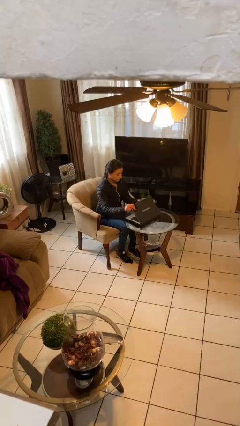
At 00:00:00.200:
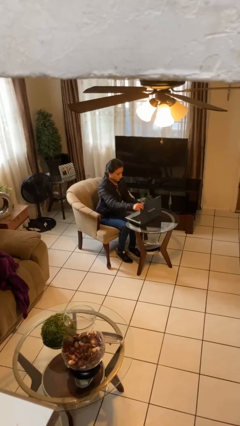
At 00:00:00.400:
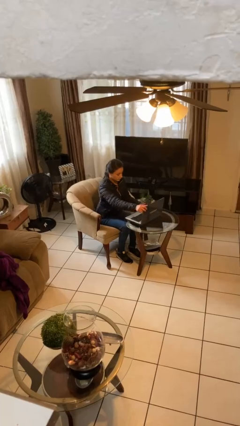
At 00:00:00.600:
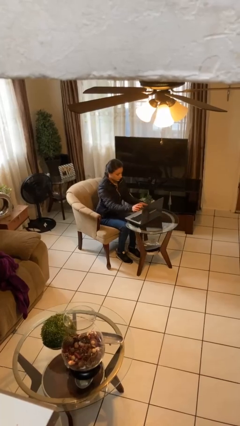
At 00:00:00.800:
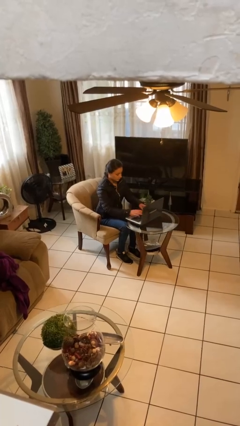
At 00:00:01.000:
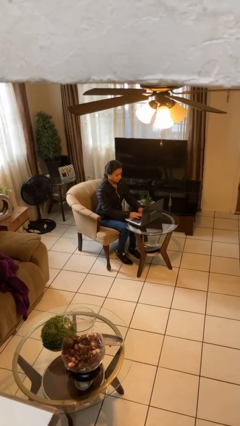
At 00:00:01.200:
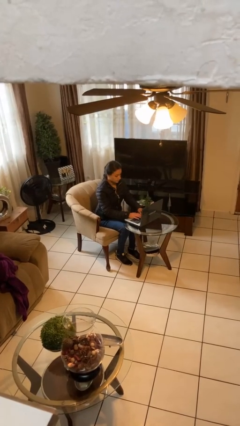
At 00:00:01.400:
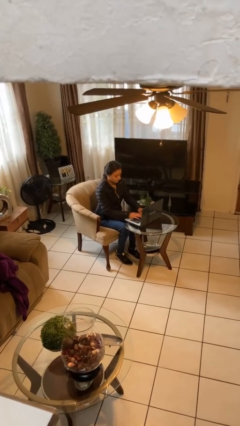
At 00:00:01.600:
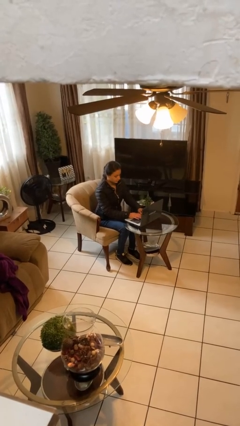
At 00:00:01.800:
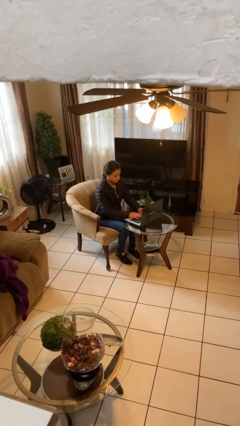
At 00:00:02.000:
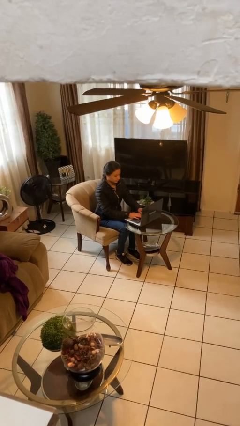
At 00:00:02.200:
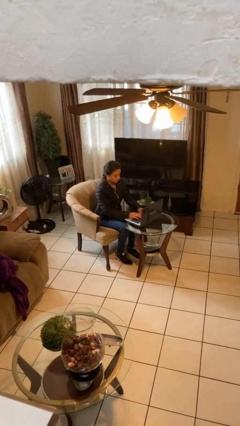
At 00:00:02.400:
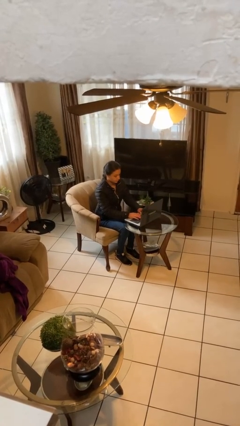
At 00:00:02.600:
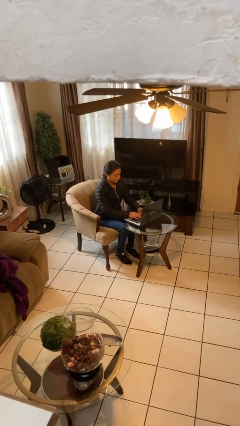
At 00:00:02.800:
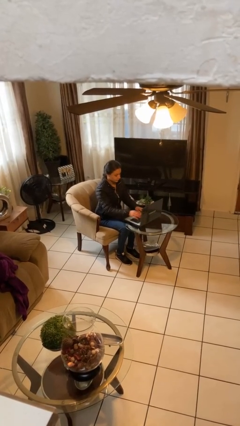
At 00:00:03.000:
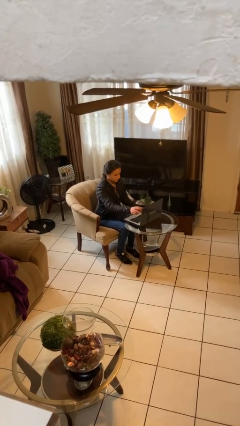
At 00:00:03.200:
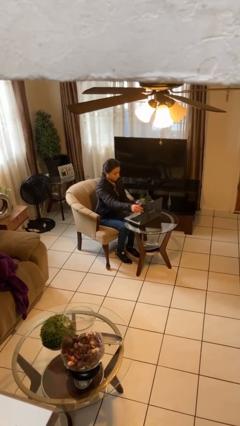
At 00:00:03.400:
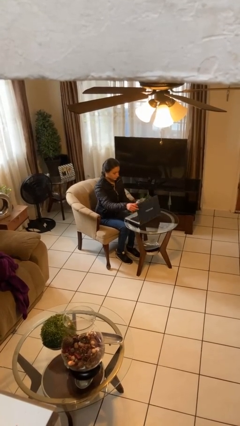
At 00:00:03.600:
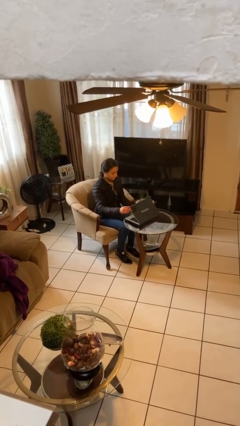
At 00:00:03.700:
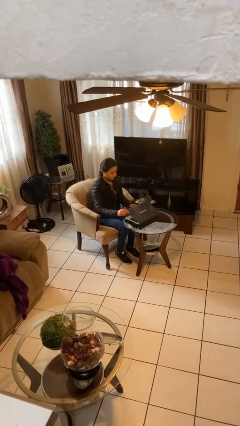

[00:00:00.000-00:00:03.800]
person interacts with laptop

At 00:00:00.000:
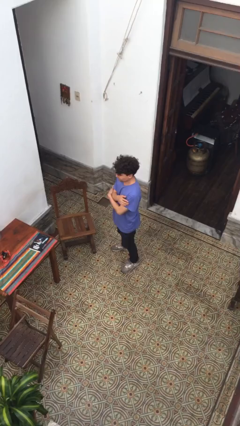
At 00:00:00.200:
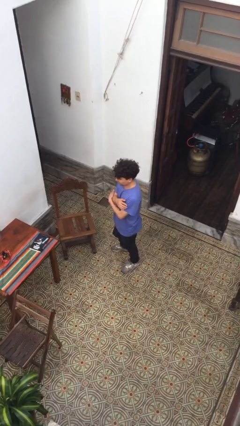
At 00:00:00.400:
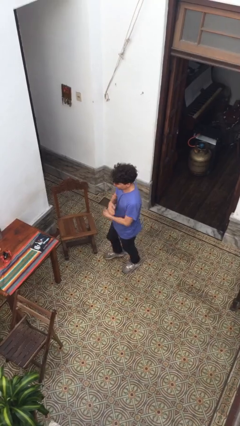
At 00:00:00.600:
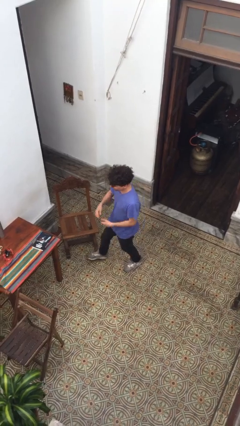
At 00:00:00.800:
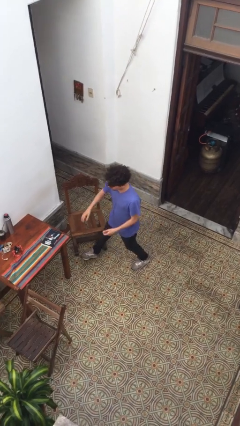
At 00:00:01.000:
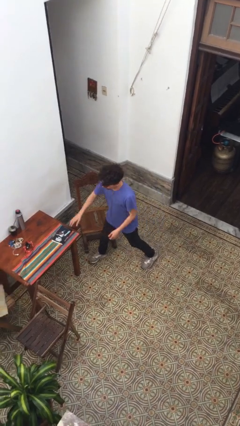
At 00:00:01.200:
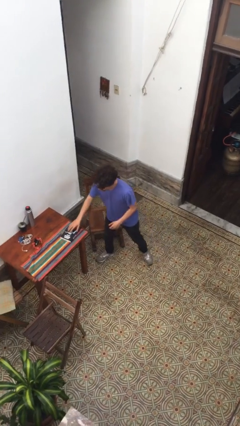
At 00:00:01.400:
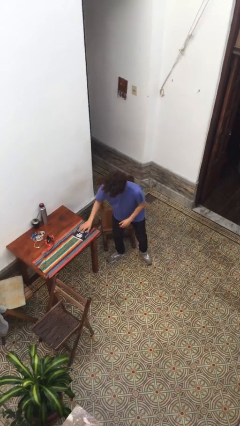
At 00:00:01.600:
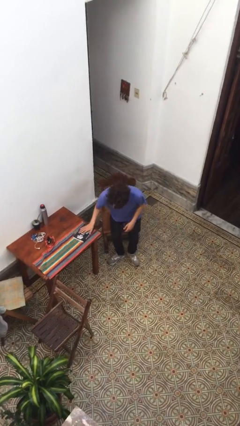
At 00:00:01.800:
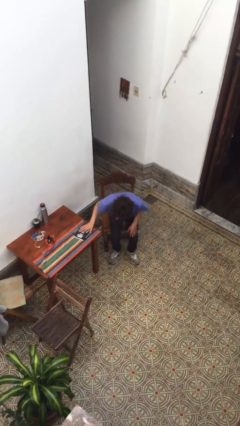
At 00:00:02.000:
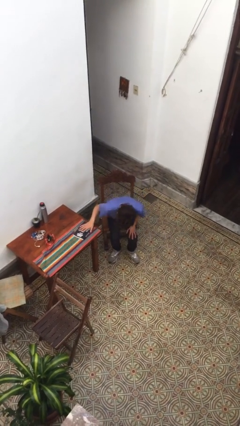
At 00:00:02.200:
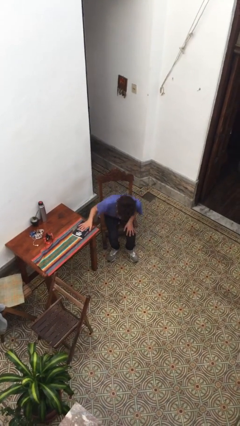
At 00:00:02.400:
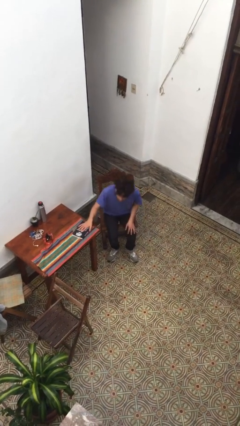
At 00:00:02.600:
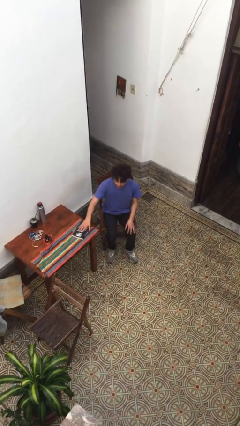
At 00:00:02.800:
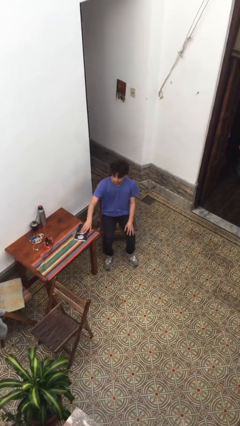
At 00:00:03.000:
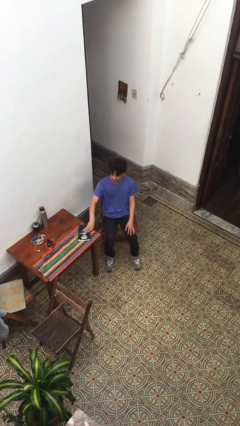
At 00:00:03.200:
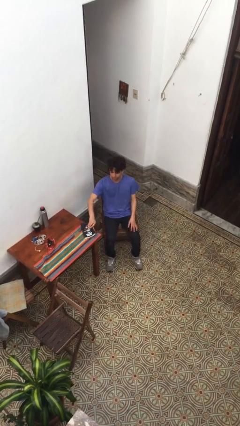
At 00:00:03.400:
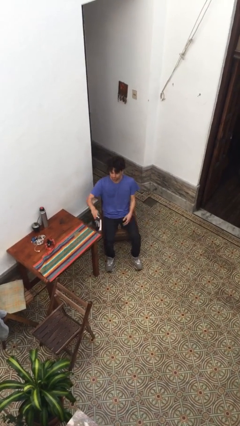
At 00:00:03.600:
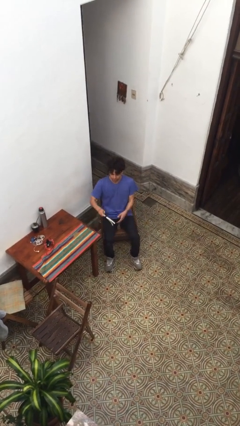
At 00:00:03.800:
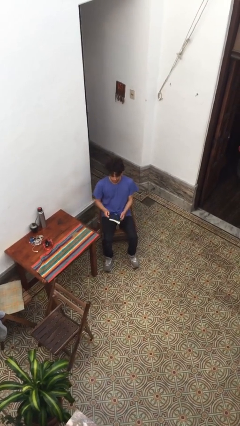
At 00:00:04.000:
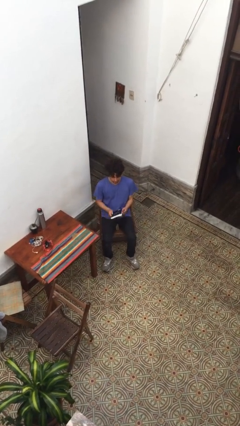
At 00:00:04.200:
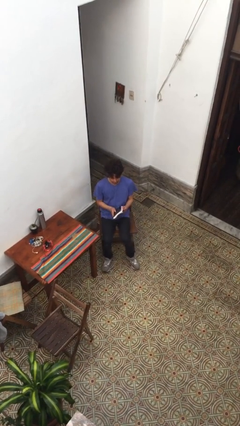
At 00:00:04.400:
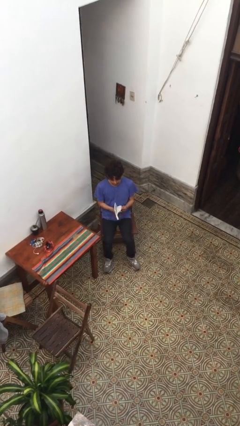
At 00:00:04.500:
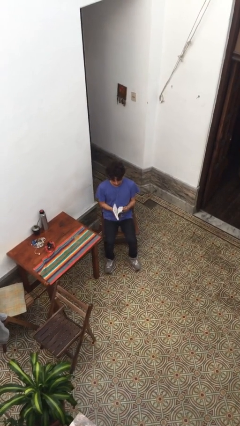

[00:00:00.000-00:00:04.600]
person sits down

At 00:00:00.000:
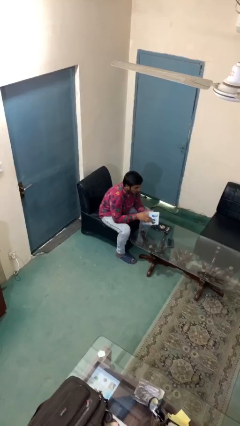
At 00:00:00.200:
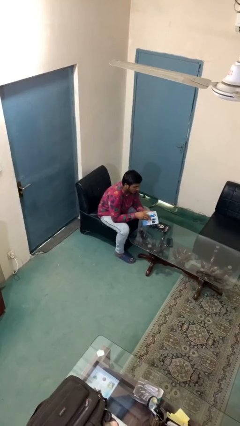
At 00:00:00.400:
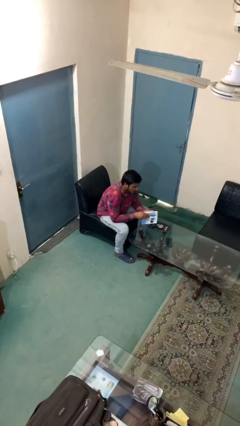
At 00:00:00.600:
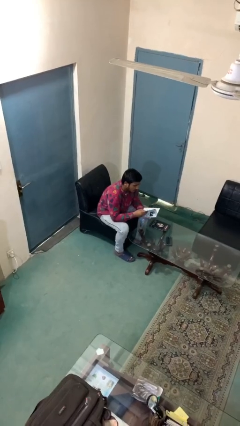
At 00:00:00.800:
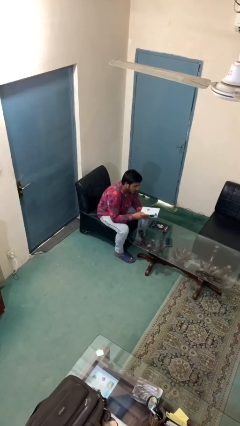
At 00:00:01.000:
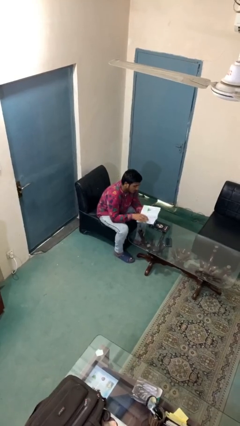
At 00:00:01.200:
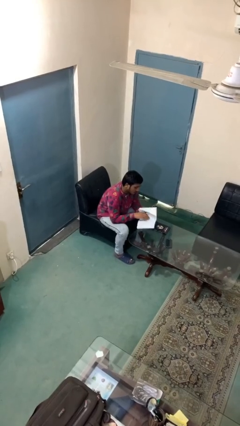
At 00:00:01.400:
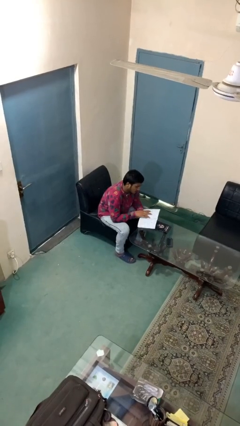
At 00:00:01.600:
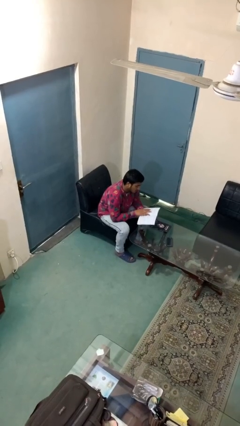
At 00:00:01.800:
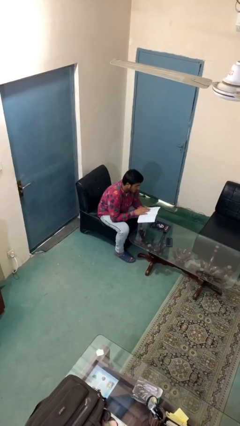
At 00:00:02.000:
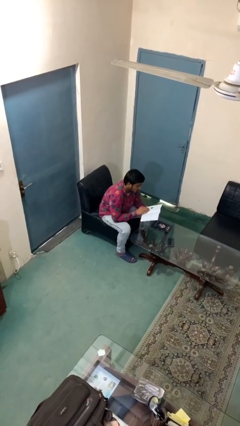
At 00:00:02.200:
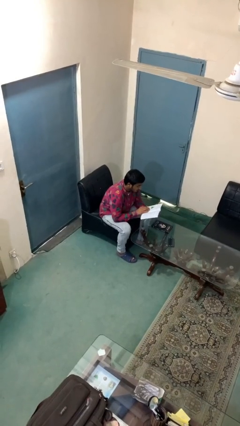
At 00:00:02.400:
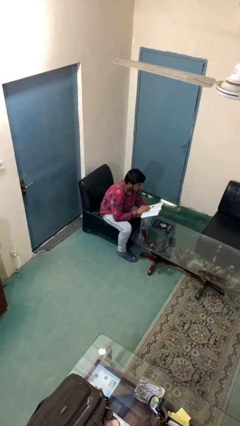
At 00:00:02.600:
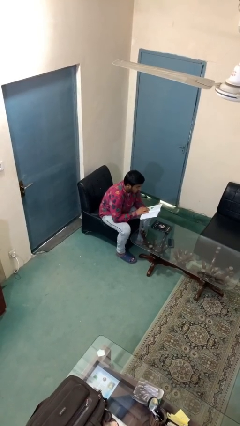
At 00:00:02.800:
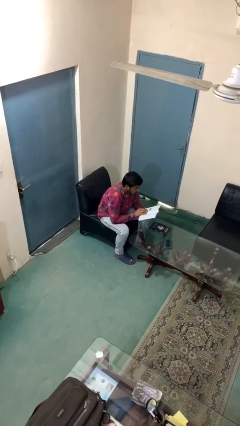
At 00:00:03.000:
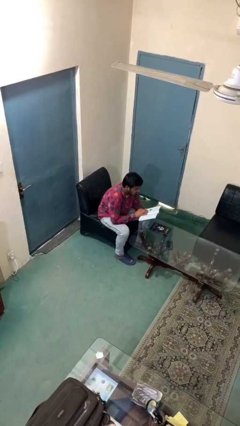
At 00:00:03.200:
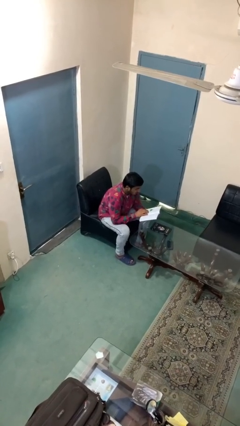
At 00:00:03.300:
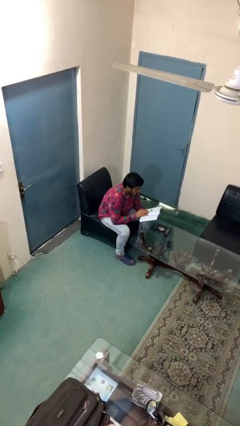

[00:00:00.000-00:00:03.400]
person reads document

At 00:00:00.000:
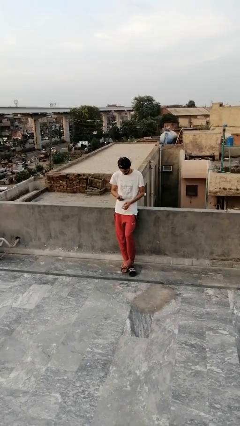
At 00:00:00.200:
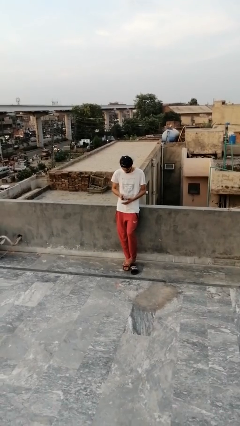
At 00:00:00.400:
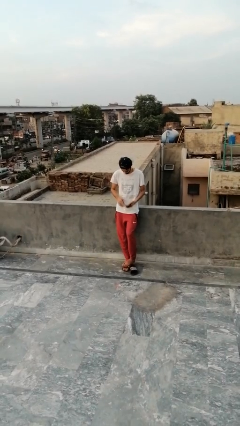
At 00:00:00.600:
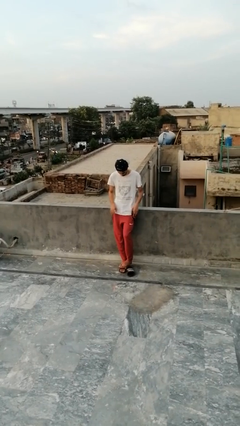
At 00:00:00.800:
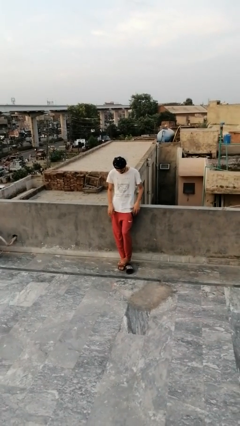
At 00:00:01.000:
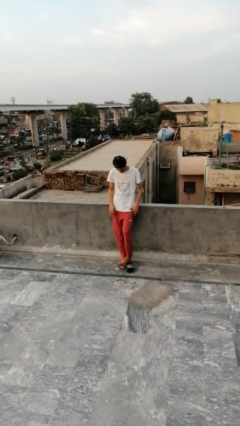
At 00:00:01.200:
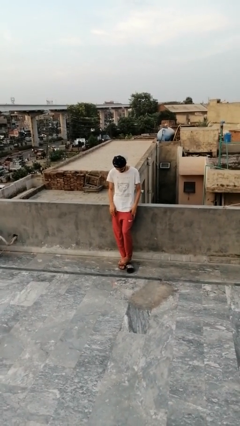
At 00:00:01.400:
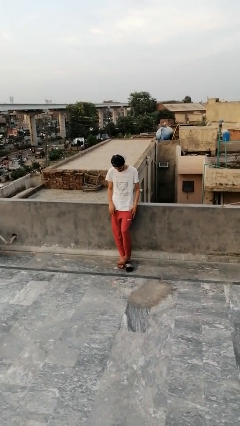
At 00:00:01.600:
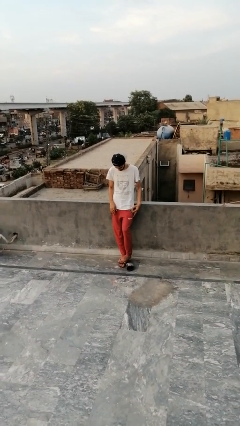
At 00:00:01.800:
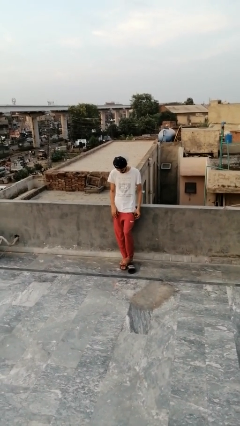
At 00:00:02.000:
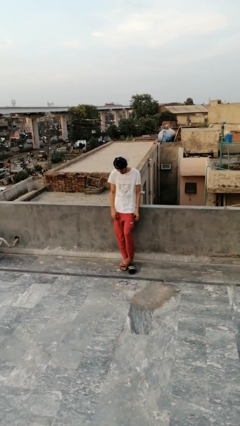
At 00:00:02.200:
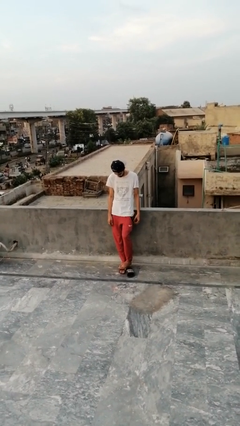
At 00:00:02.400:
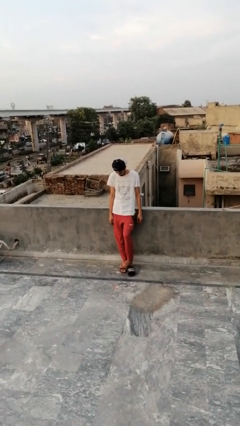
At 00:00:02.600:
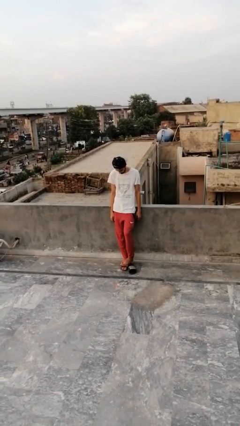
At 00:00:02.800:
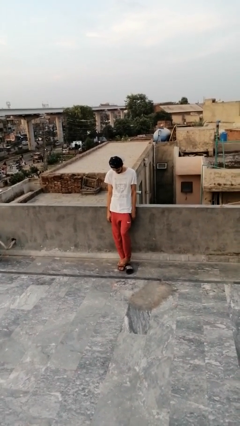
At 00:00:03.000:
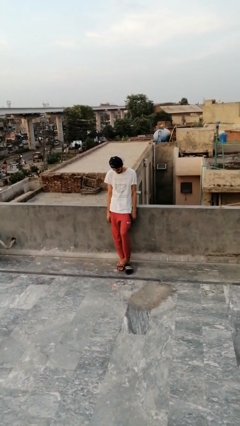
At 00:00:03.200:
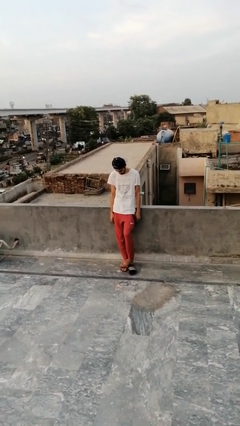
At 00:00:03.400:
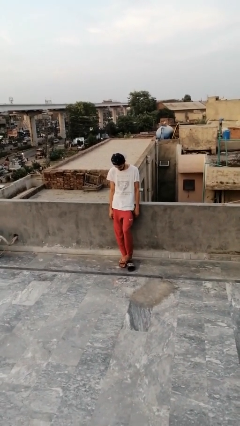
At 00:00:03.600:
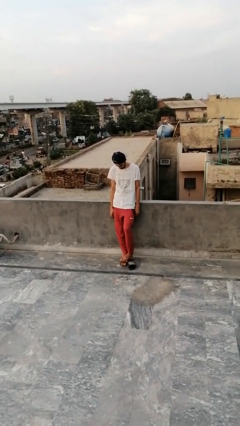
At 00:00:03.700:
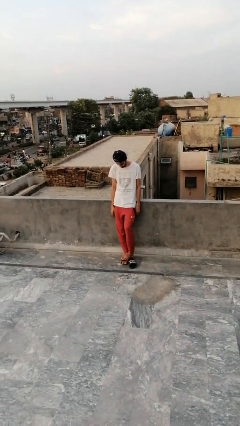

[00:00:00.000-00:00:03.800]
person puts phone into pocket

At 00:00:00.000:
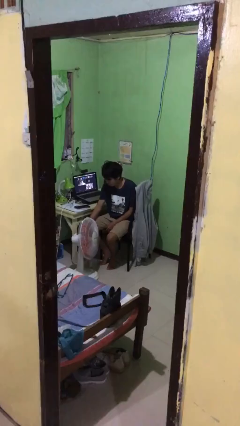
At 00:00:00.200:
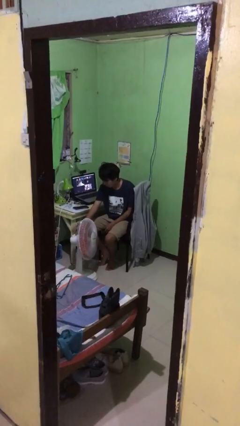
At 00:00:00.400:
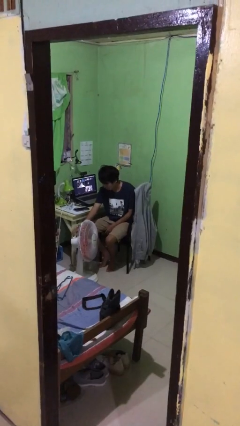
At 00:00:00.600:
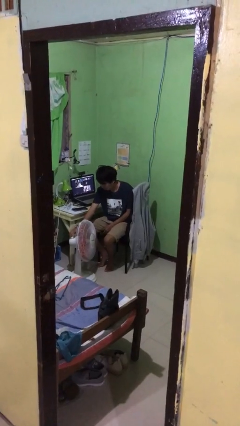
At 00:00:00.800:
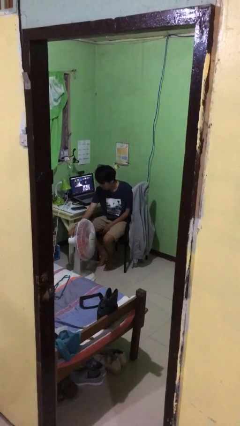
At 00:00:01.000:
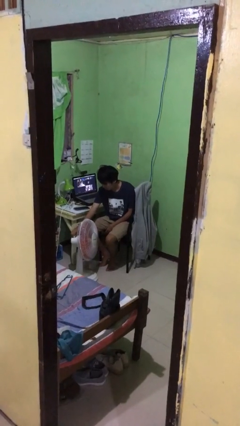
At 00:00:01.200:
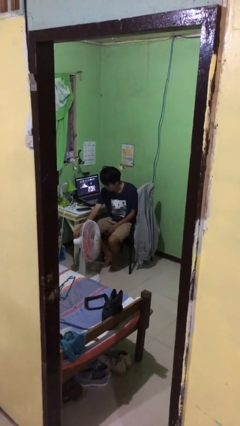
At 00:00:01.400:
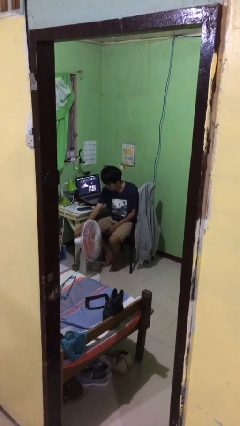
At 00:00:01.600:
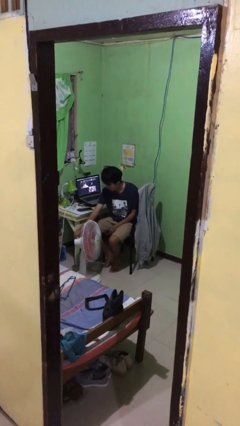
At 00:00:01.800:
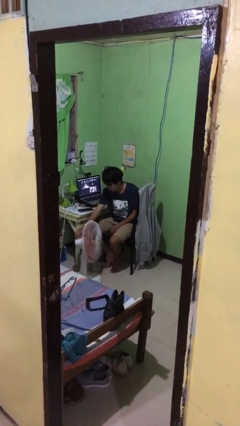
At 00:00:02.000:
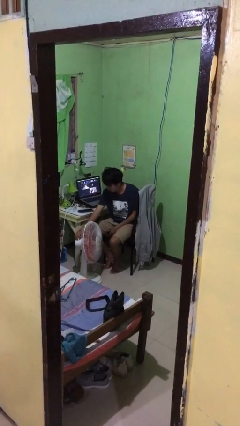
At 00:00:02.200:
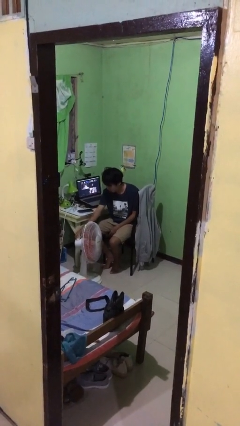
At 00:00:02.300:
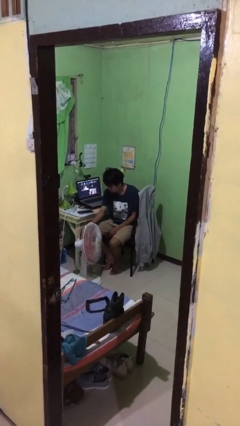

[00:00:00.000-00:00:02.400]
person turns off fan
